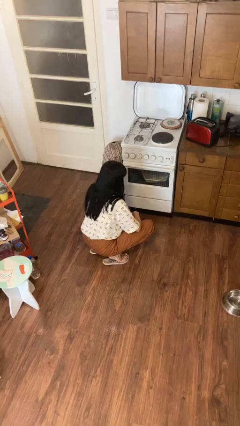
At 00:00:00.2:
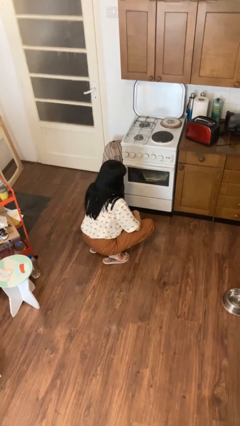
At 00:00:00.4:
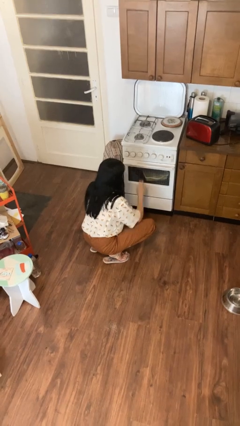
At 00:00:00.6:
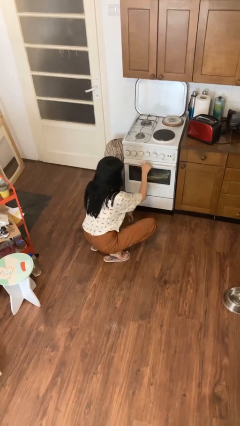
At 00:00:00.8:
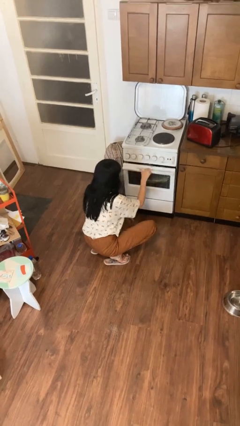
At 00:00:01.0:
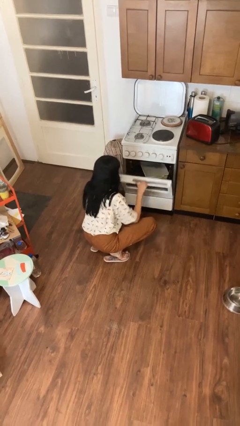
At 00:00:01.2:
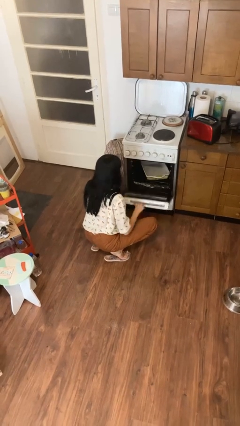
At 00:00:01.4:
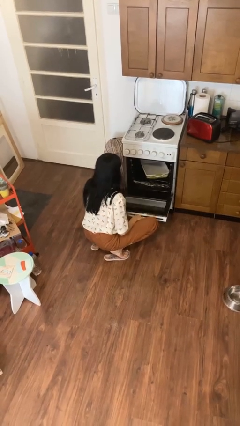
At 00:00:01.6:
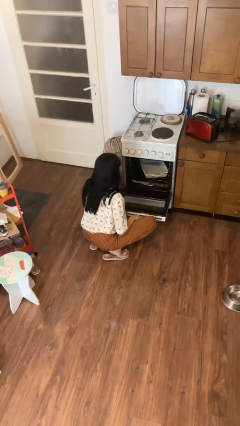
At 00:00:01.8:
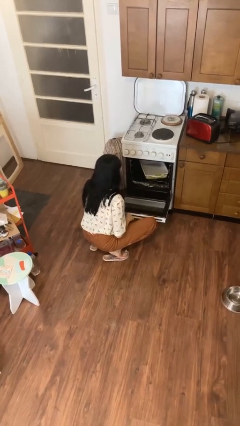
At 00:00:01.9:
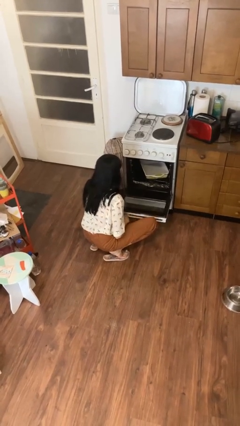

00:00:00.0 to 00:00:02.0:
person opens oven door

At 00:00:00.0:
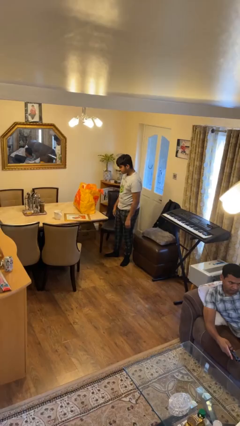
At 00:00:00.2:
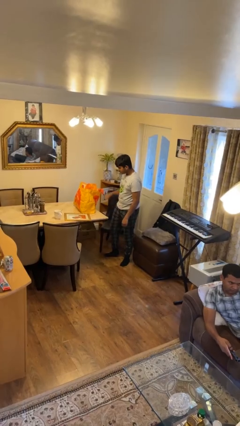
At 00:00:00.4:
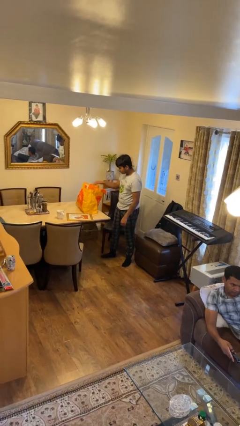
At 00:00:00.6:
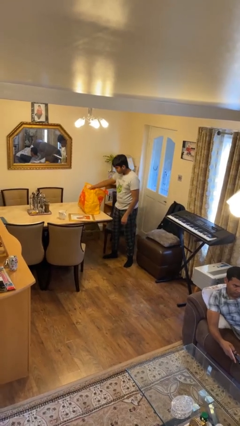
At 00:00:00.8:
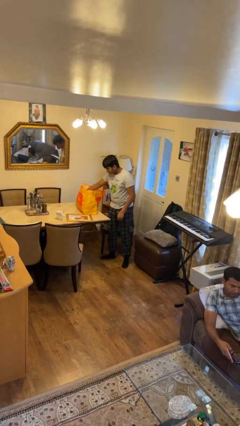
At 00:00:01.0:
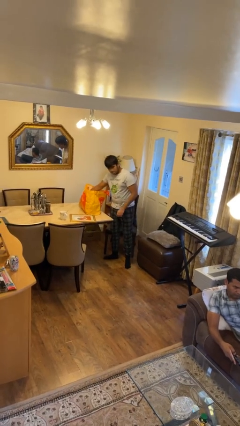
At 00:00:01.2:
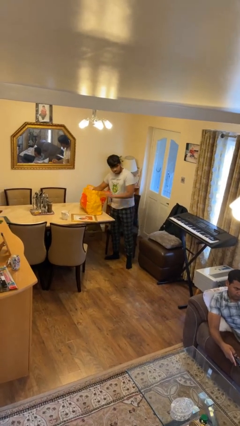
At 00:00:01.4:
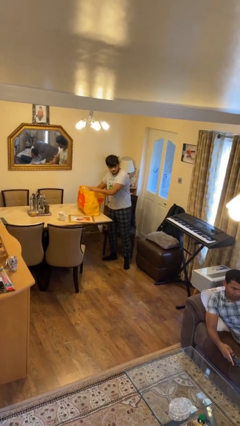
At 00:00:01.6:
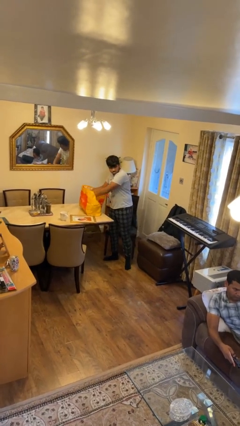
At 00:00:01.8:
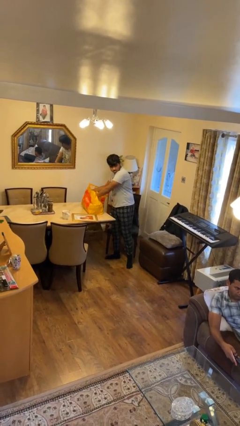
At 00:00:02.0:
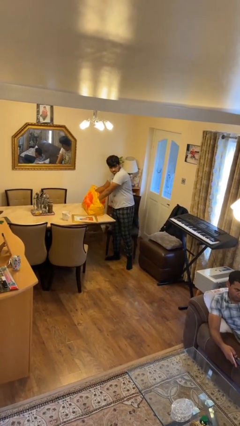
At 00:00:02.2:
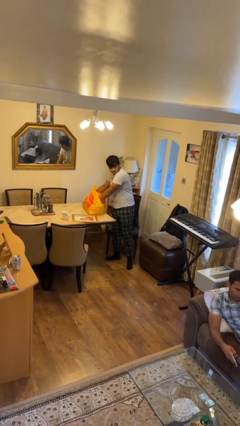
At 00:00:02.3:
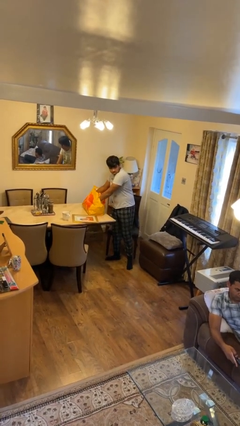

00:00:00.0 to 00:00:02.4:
person searches in bag

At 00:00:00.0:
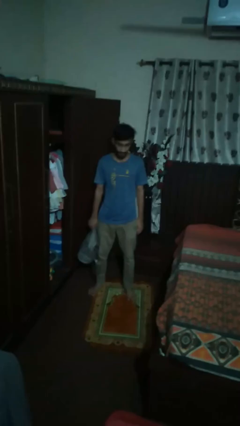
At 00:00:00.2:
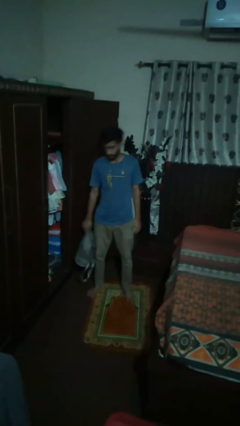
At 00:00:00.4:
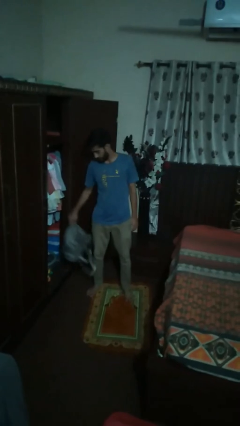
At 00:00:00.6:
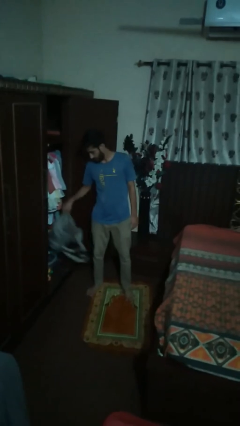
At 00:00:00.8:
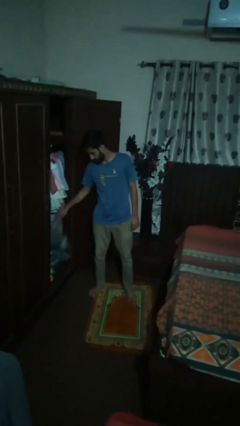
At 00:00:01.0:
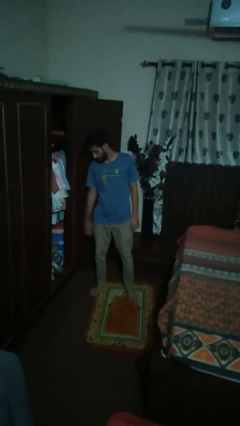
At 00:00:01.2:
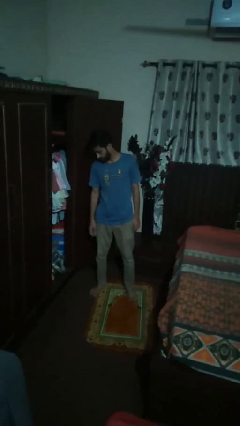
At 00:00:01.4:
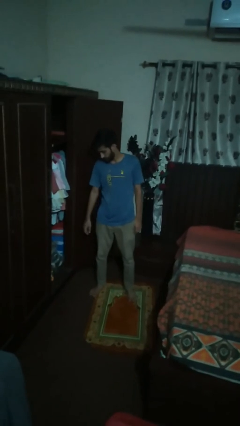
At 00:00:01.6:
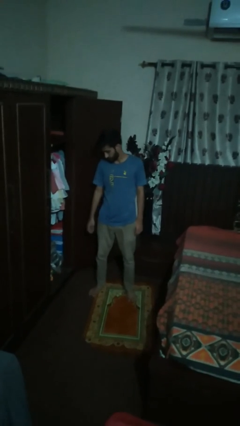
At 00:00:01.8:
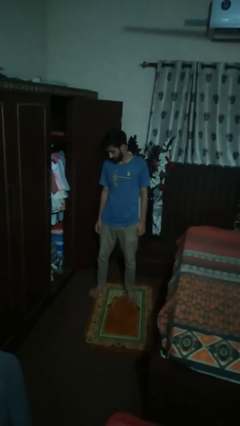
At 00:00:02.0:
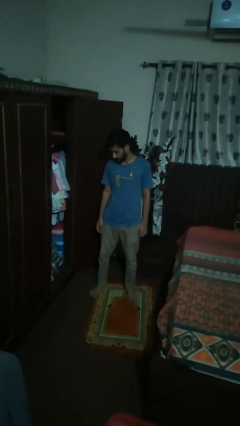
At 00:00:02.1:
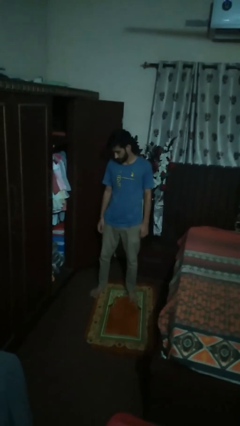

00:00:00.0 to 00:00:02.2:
person puts down object into cabinet

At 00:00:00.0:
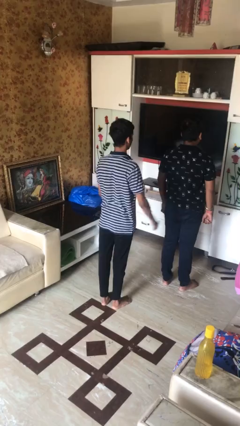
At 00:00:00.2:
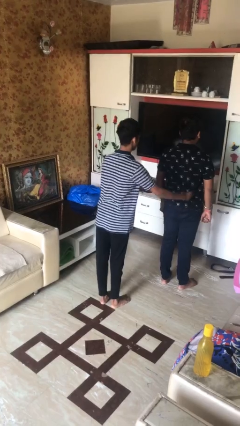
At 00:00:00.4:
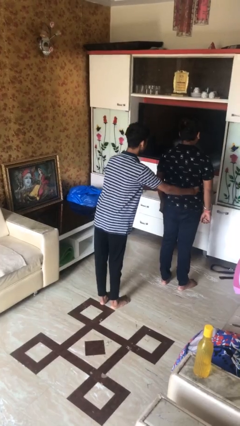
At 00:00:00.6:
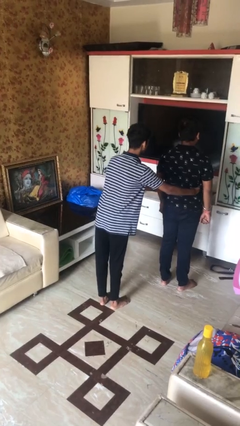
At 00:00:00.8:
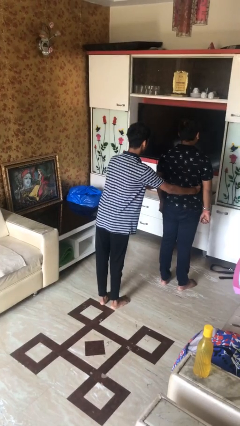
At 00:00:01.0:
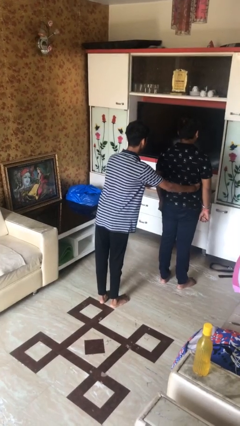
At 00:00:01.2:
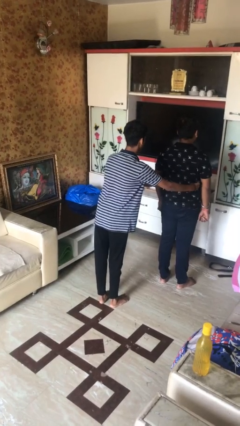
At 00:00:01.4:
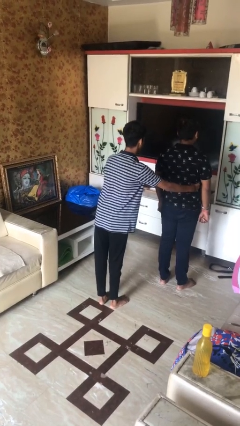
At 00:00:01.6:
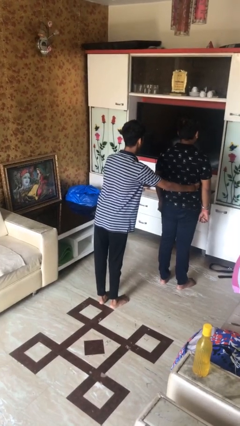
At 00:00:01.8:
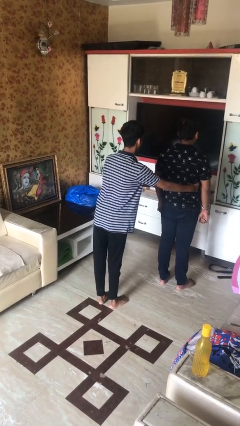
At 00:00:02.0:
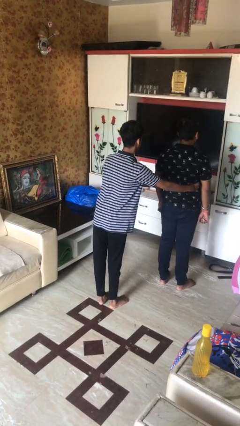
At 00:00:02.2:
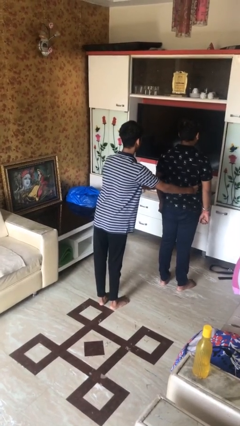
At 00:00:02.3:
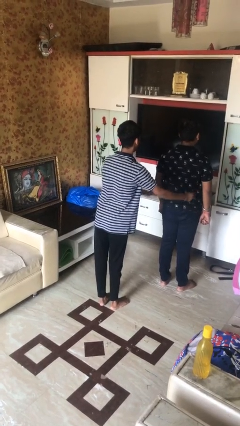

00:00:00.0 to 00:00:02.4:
person tickles person

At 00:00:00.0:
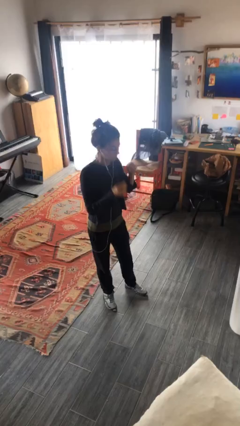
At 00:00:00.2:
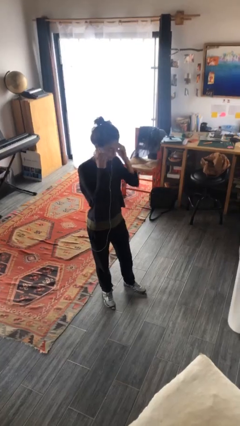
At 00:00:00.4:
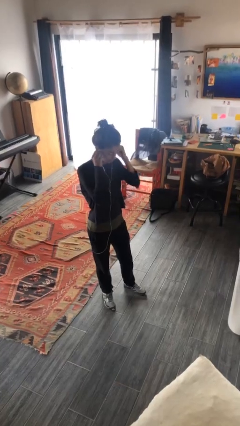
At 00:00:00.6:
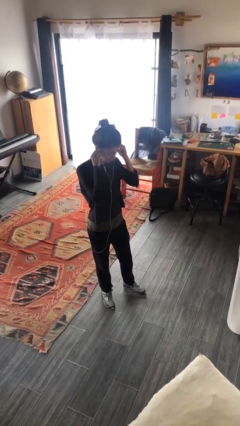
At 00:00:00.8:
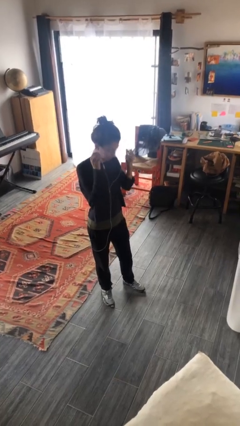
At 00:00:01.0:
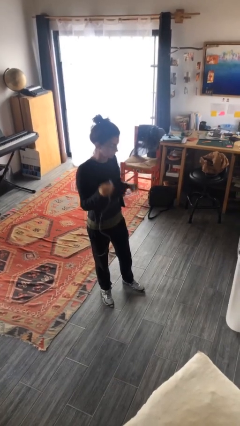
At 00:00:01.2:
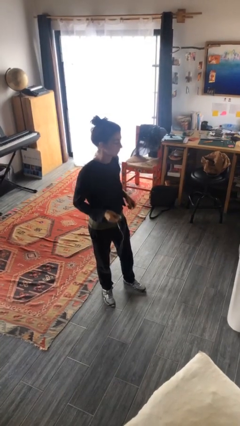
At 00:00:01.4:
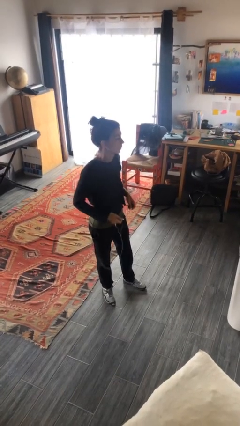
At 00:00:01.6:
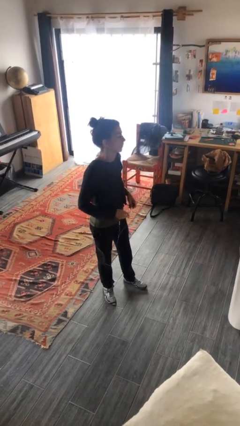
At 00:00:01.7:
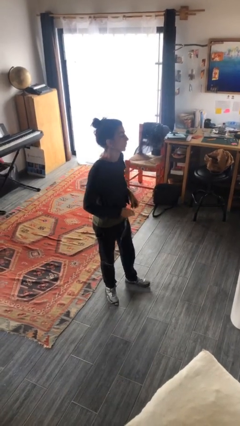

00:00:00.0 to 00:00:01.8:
person takes off headphones

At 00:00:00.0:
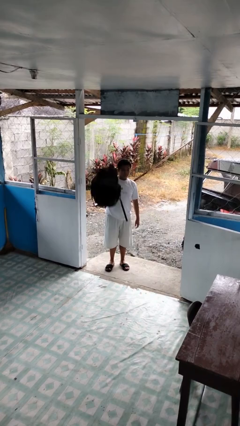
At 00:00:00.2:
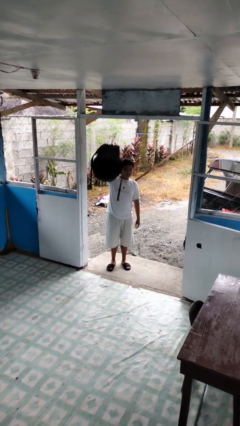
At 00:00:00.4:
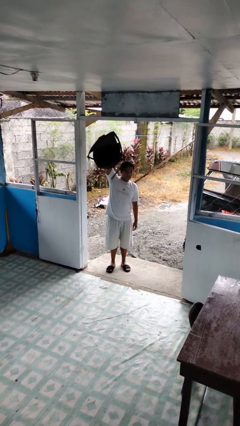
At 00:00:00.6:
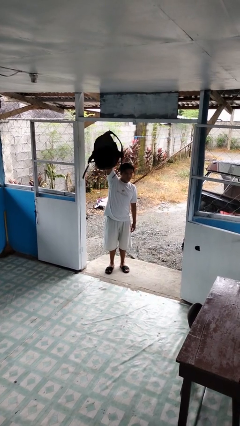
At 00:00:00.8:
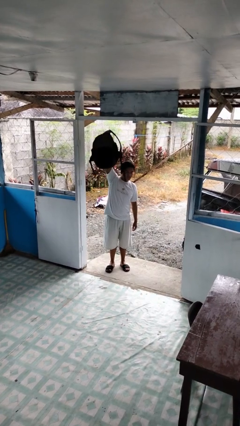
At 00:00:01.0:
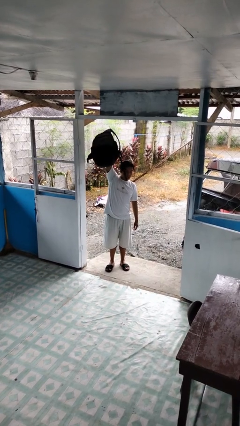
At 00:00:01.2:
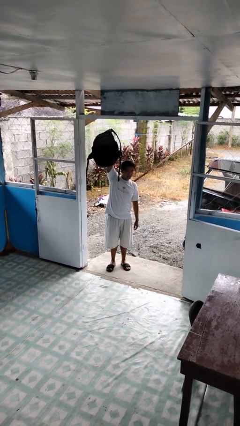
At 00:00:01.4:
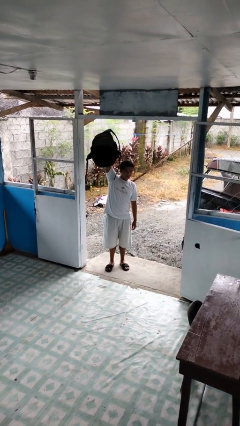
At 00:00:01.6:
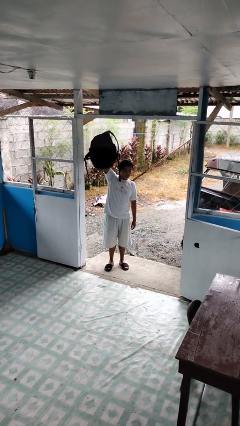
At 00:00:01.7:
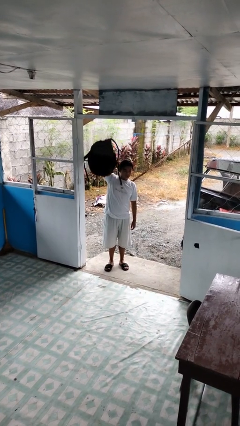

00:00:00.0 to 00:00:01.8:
person holds object above head

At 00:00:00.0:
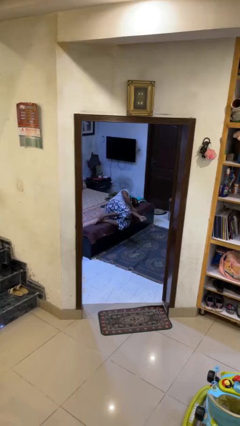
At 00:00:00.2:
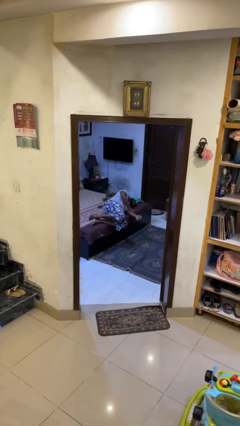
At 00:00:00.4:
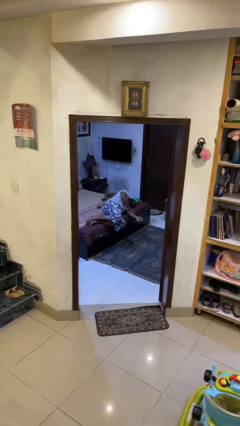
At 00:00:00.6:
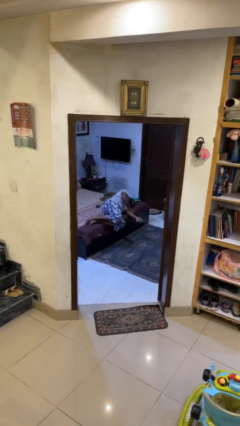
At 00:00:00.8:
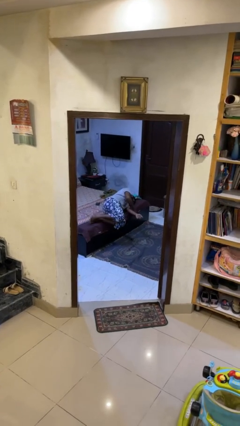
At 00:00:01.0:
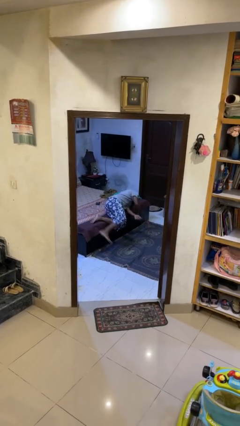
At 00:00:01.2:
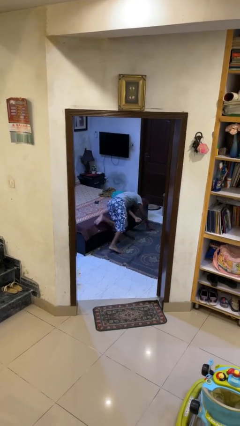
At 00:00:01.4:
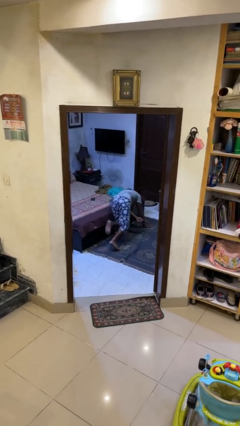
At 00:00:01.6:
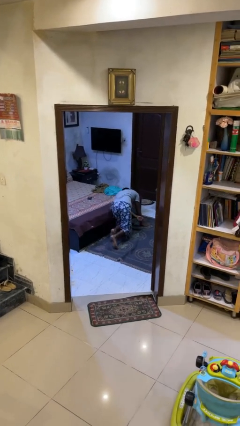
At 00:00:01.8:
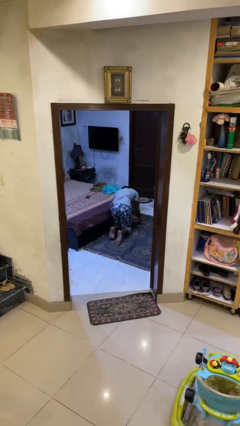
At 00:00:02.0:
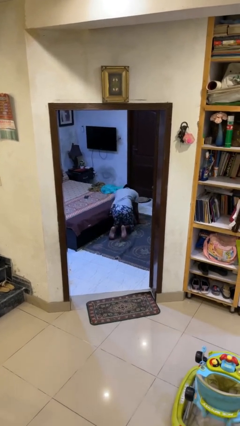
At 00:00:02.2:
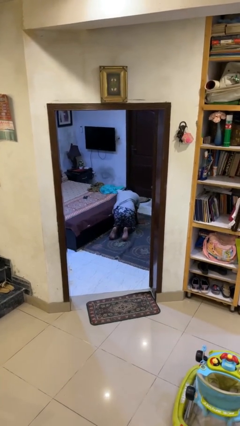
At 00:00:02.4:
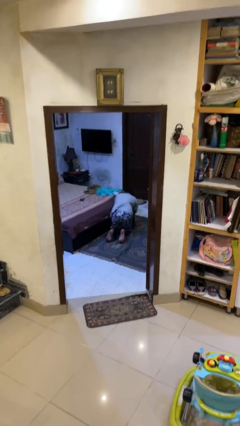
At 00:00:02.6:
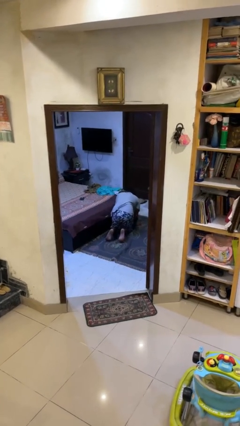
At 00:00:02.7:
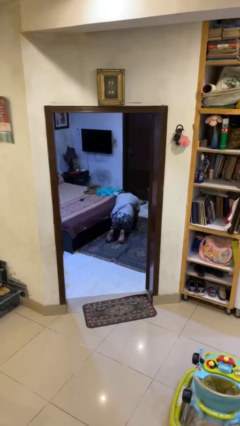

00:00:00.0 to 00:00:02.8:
person falls from bed

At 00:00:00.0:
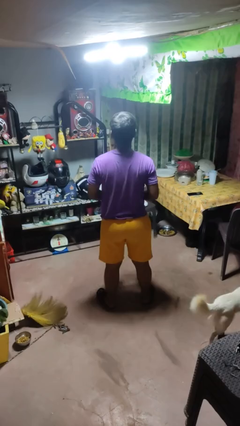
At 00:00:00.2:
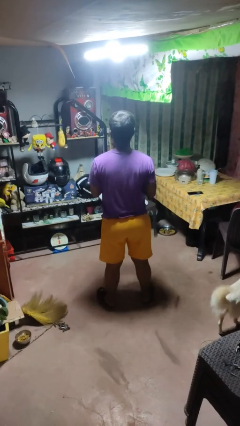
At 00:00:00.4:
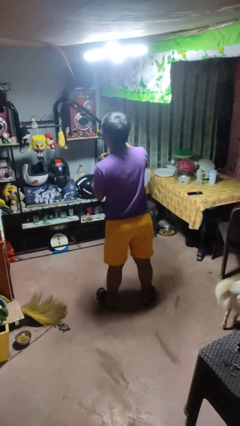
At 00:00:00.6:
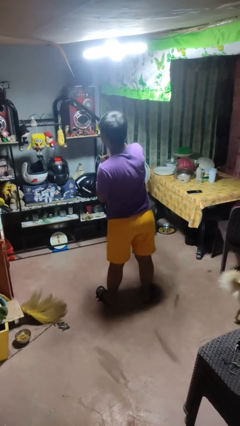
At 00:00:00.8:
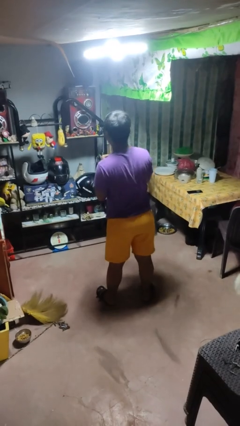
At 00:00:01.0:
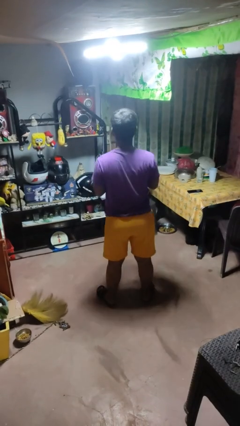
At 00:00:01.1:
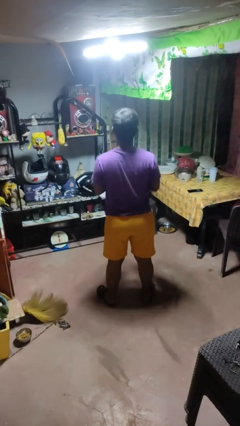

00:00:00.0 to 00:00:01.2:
person punches
